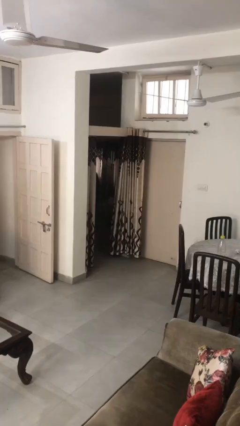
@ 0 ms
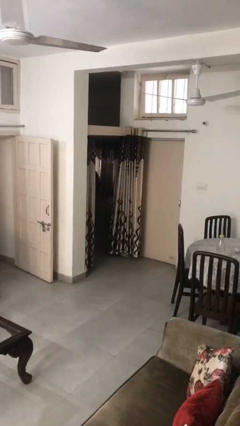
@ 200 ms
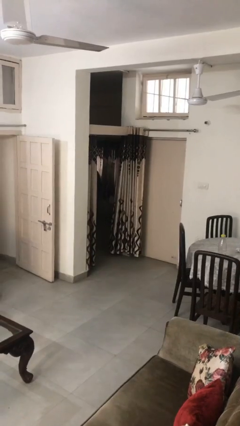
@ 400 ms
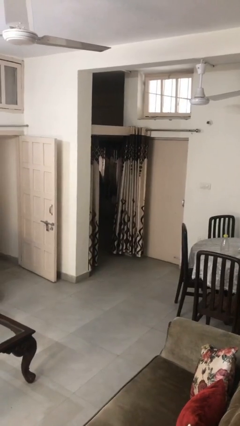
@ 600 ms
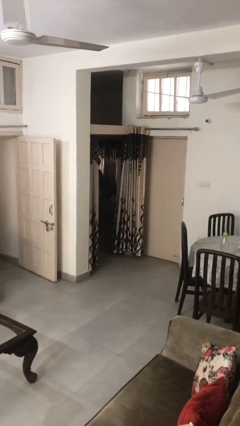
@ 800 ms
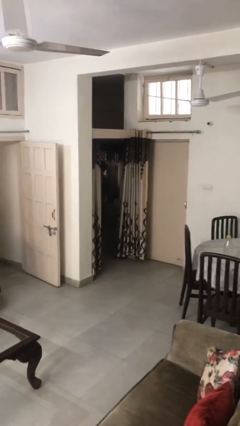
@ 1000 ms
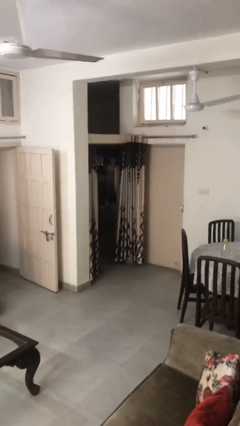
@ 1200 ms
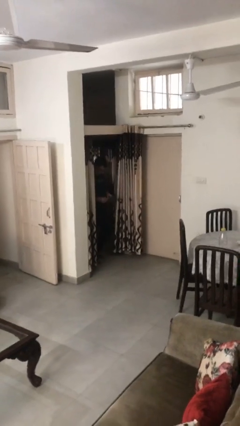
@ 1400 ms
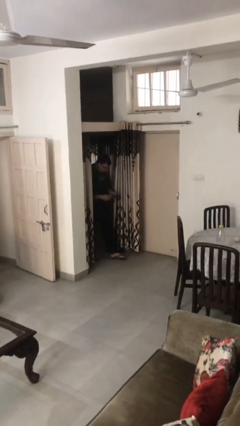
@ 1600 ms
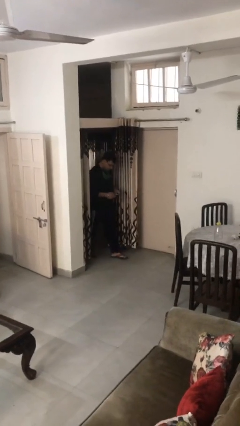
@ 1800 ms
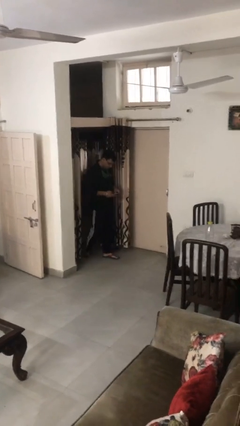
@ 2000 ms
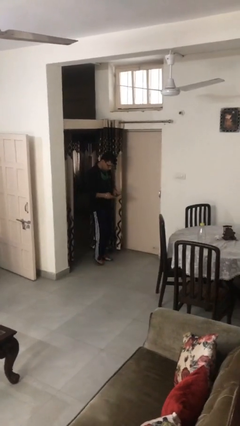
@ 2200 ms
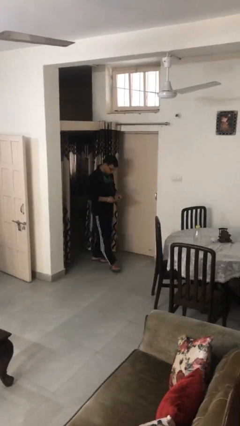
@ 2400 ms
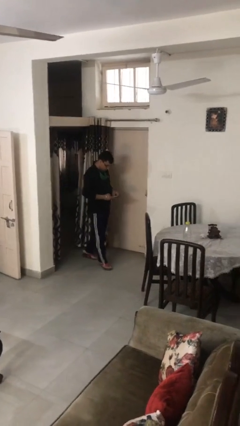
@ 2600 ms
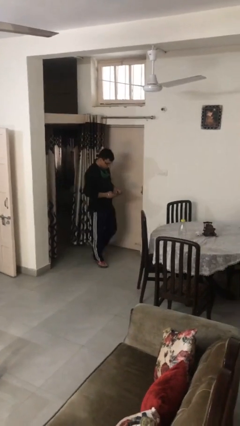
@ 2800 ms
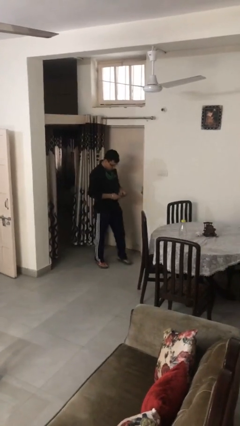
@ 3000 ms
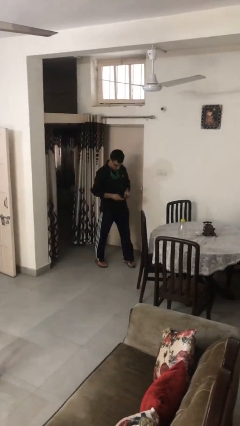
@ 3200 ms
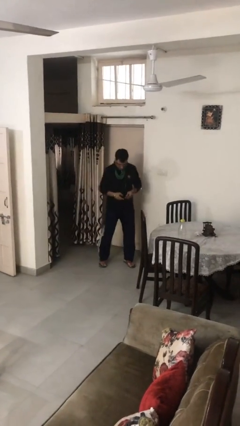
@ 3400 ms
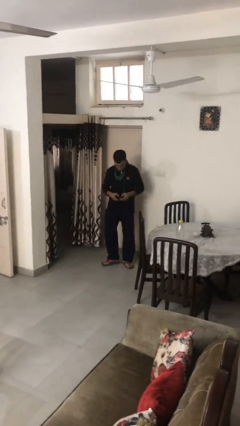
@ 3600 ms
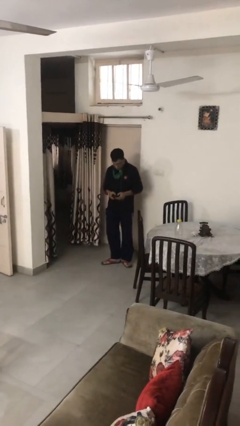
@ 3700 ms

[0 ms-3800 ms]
person enters scene through structure

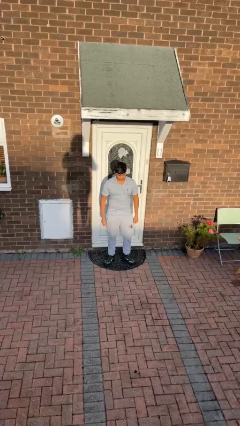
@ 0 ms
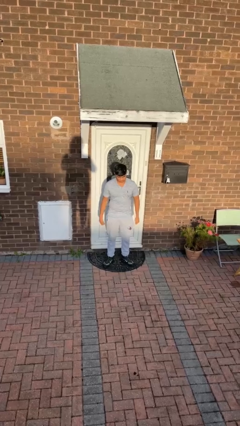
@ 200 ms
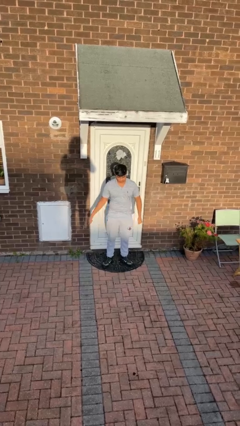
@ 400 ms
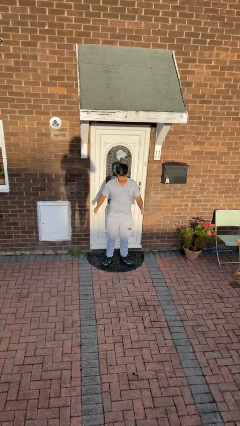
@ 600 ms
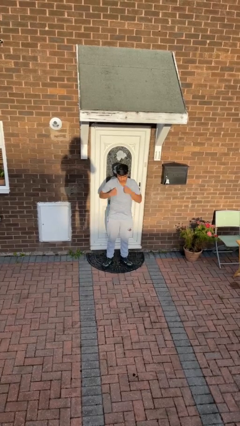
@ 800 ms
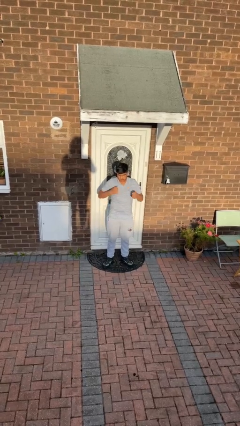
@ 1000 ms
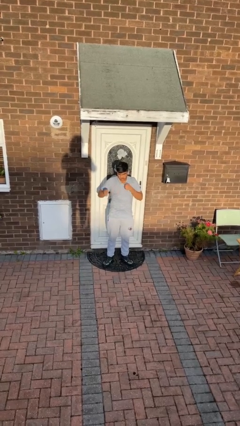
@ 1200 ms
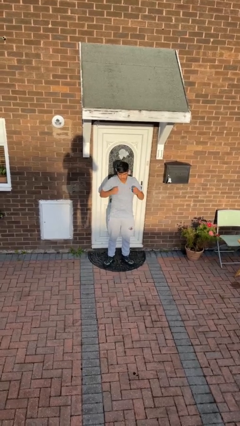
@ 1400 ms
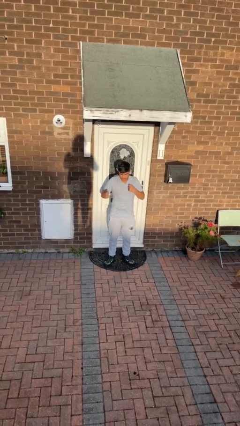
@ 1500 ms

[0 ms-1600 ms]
person drums on chest

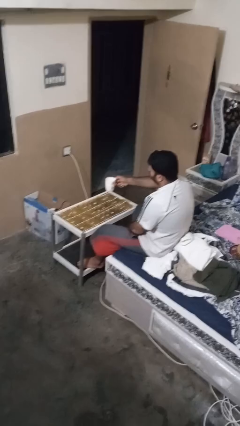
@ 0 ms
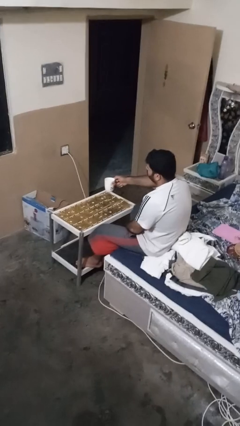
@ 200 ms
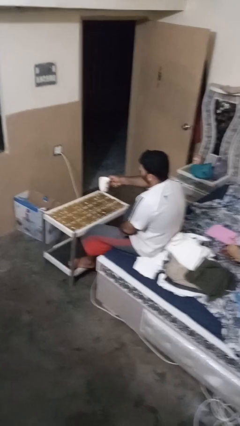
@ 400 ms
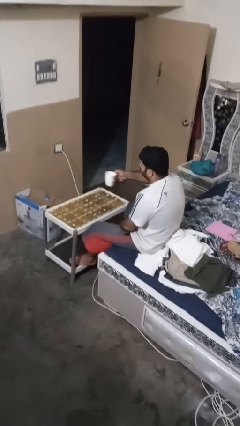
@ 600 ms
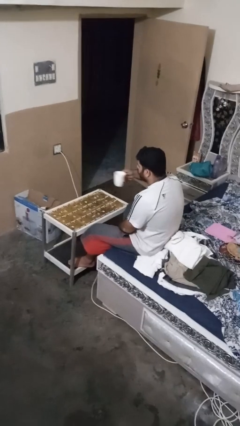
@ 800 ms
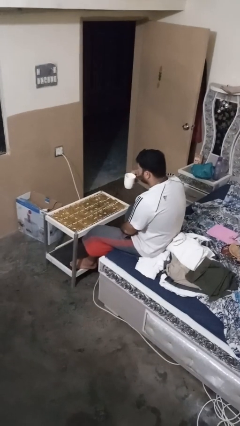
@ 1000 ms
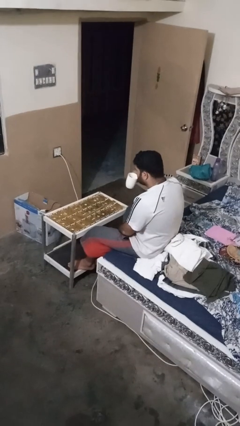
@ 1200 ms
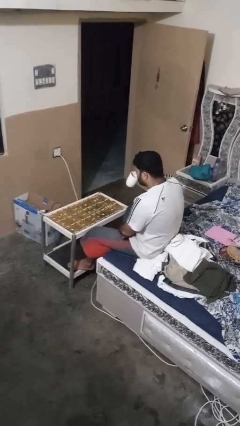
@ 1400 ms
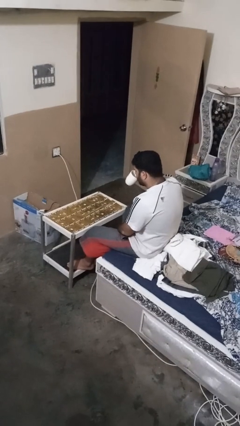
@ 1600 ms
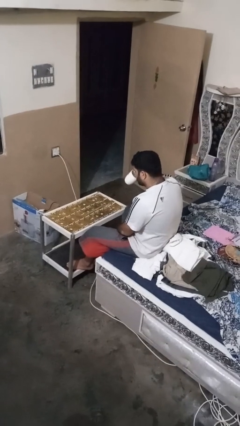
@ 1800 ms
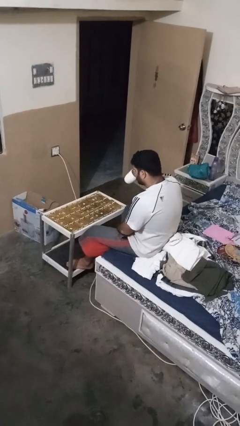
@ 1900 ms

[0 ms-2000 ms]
person drinks from mug

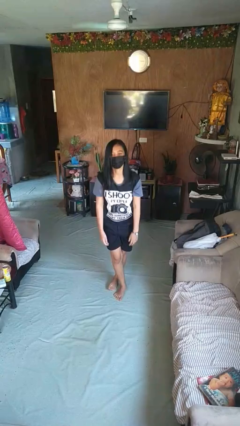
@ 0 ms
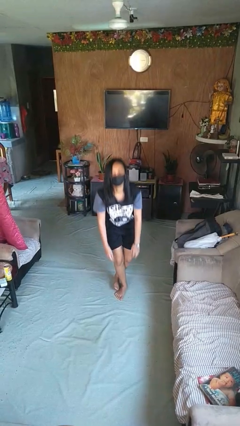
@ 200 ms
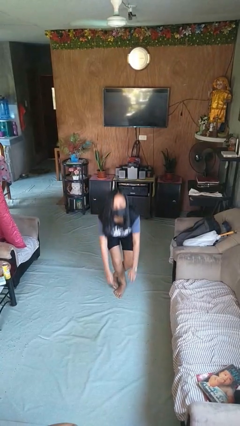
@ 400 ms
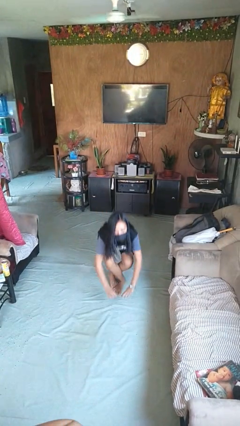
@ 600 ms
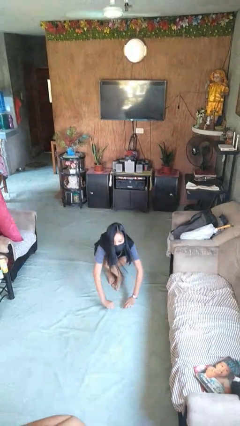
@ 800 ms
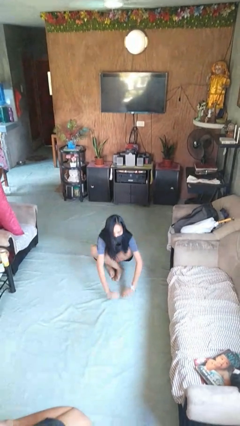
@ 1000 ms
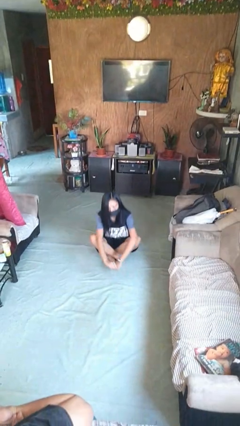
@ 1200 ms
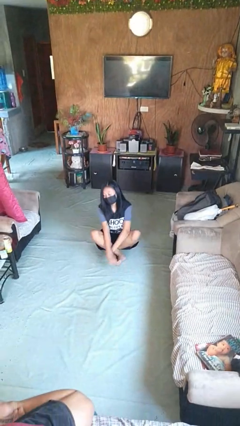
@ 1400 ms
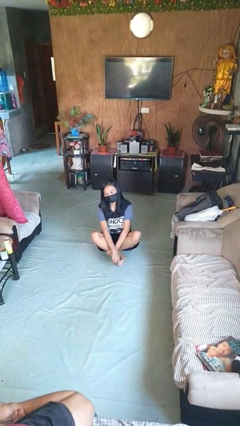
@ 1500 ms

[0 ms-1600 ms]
person sits crisscross

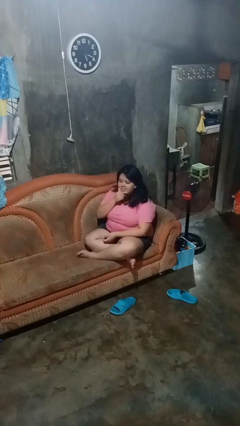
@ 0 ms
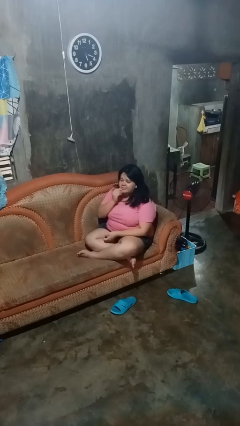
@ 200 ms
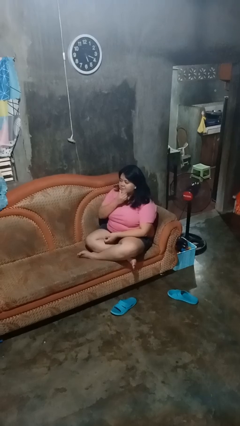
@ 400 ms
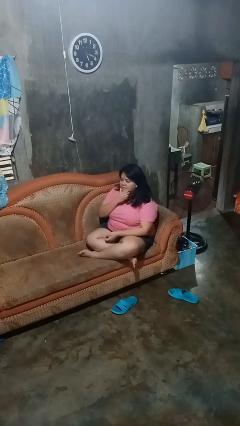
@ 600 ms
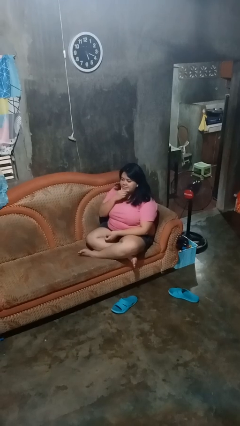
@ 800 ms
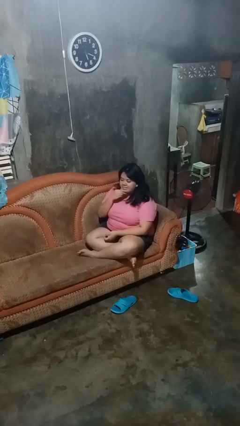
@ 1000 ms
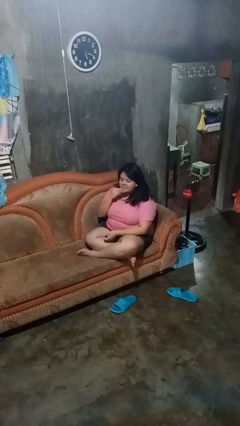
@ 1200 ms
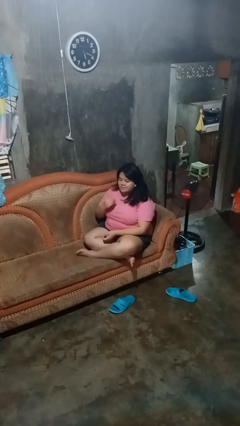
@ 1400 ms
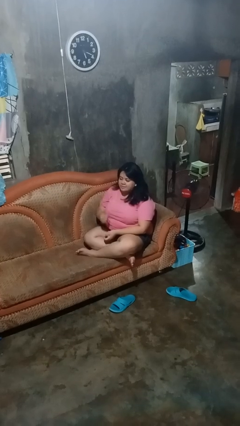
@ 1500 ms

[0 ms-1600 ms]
person strokes chin

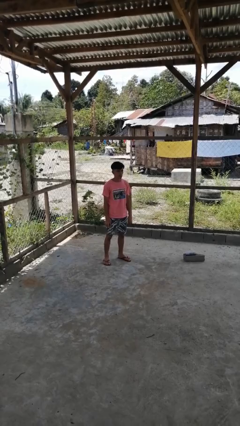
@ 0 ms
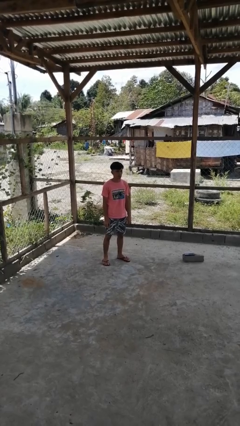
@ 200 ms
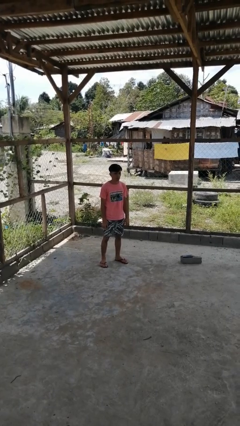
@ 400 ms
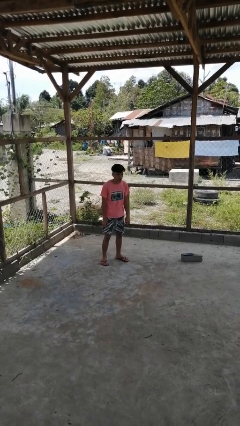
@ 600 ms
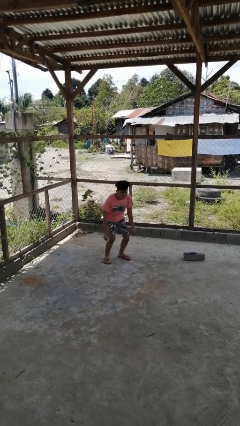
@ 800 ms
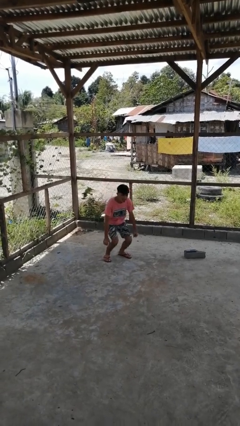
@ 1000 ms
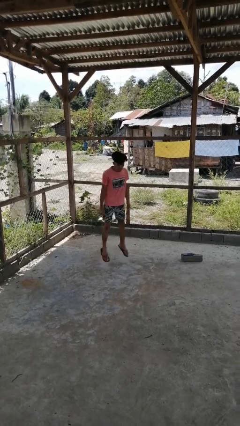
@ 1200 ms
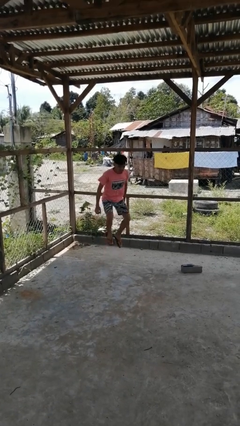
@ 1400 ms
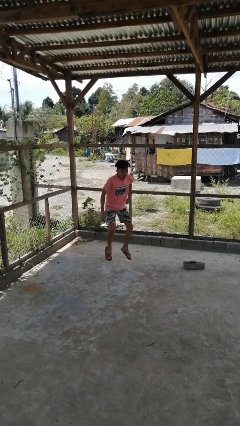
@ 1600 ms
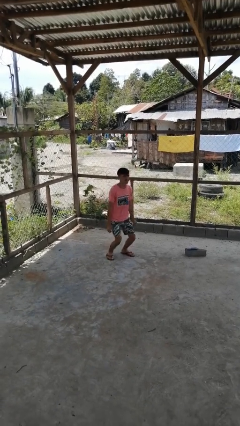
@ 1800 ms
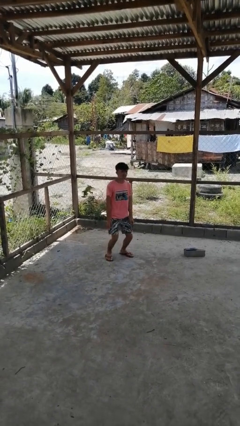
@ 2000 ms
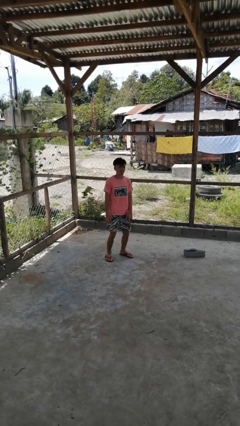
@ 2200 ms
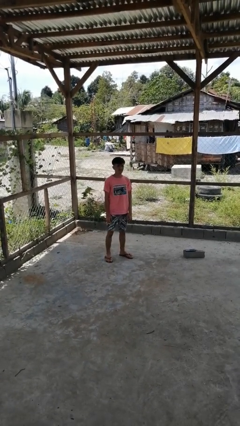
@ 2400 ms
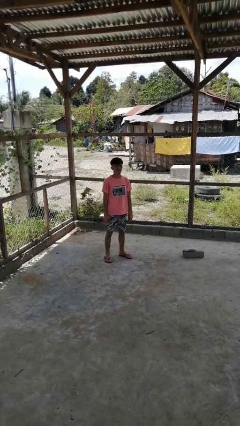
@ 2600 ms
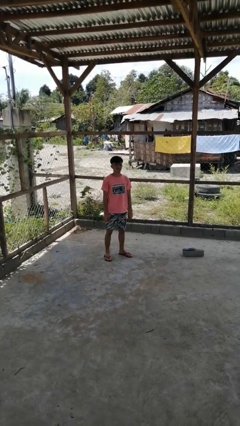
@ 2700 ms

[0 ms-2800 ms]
person jumps

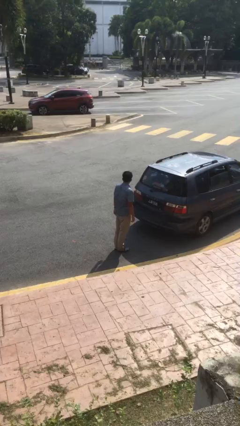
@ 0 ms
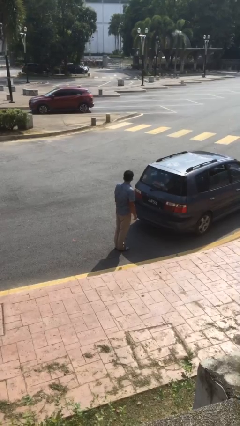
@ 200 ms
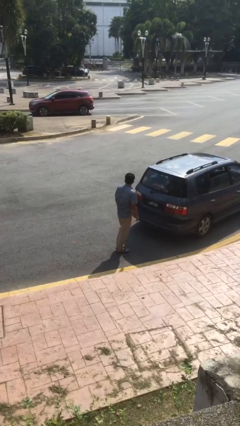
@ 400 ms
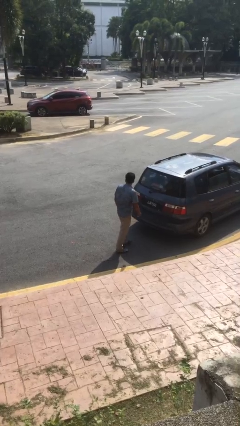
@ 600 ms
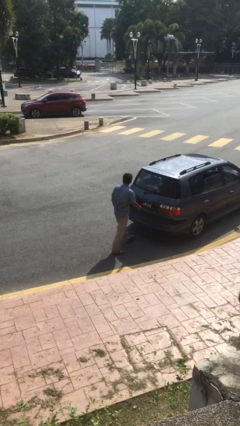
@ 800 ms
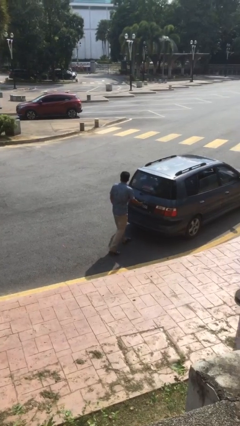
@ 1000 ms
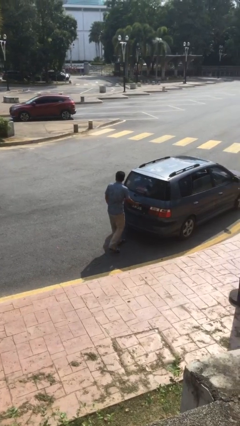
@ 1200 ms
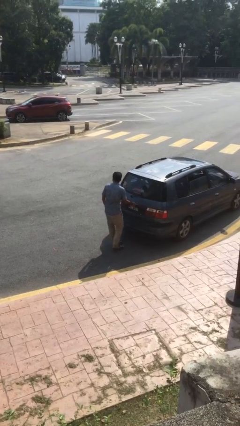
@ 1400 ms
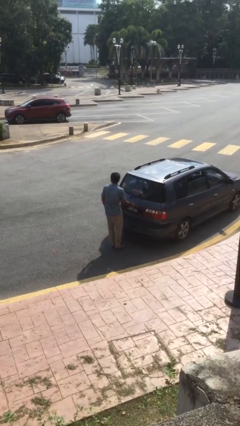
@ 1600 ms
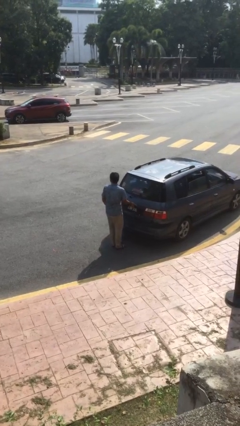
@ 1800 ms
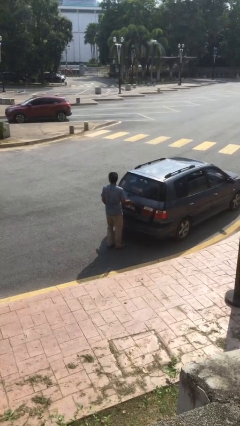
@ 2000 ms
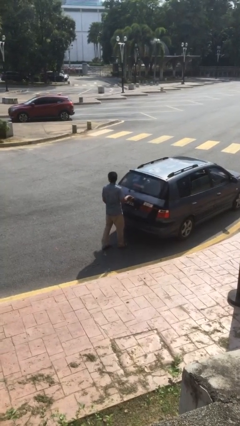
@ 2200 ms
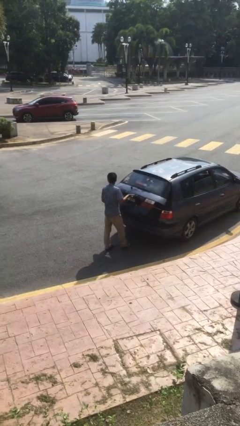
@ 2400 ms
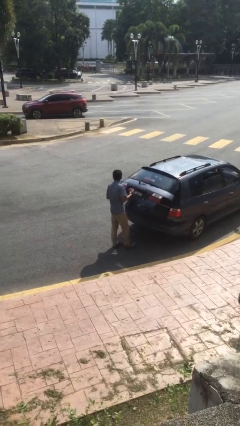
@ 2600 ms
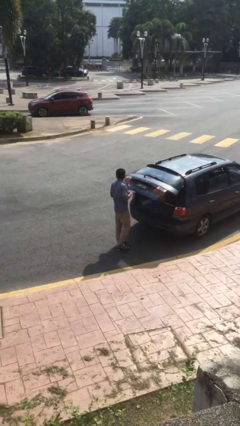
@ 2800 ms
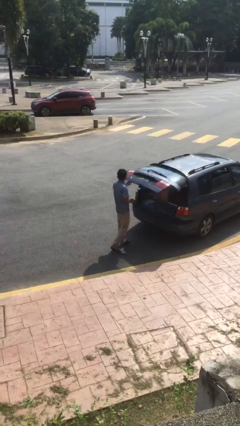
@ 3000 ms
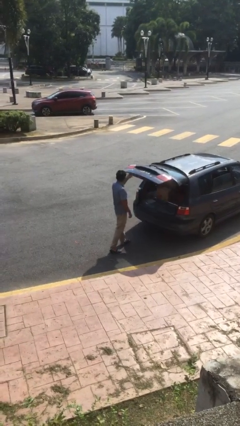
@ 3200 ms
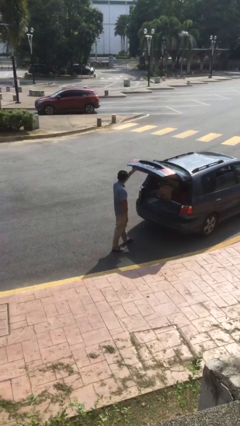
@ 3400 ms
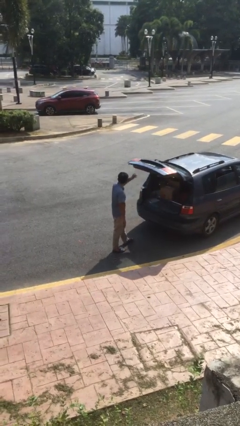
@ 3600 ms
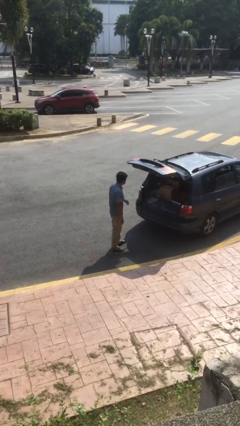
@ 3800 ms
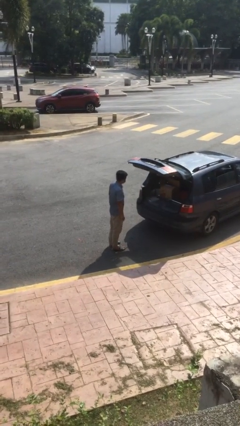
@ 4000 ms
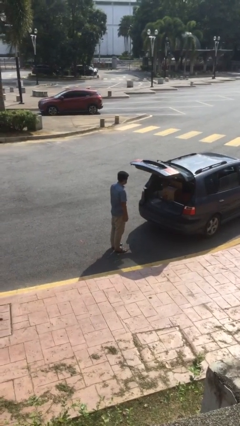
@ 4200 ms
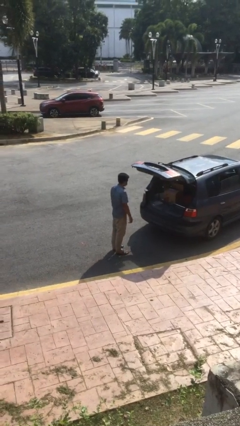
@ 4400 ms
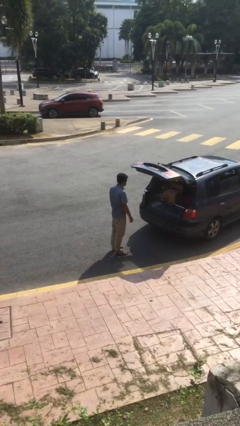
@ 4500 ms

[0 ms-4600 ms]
person opens car trunk
